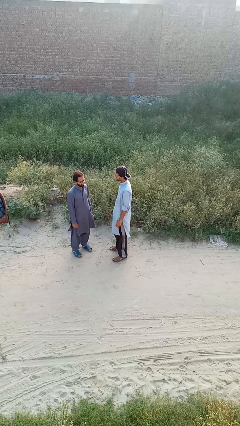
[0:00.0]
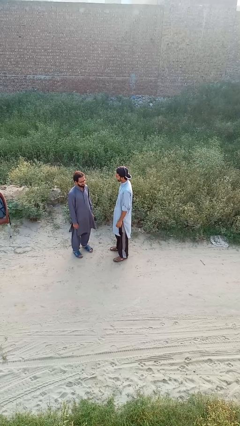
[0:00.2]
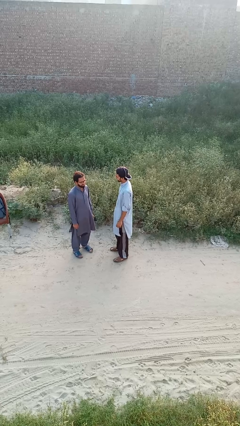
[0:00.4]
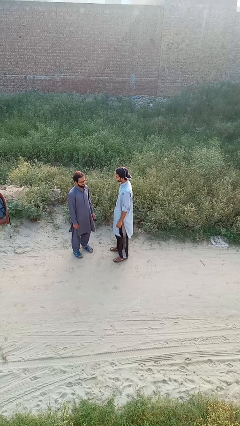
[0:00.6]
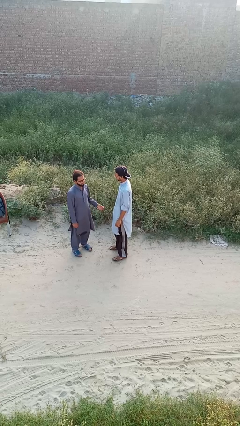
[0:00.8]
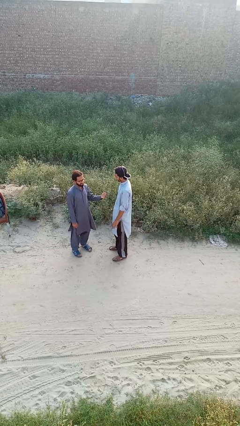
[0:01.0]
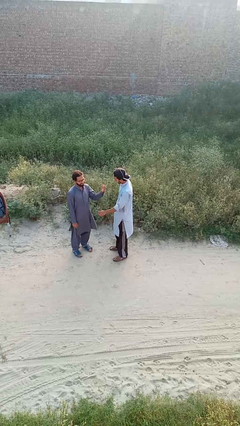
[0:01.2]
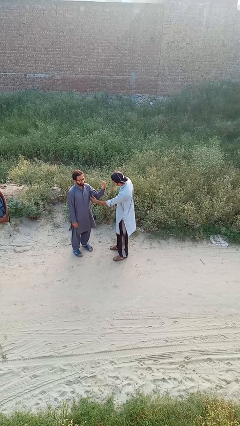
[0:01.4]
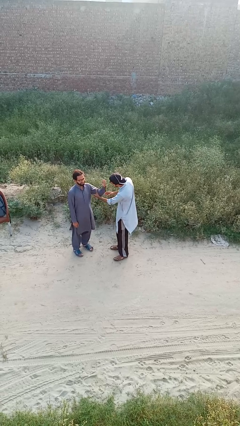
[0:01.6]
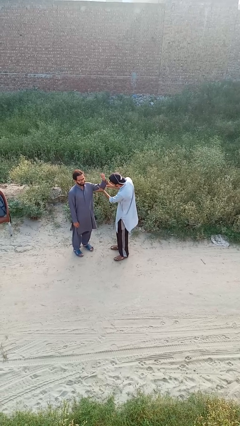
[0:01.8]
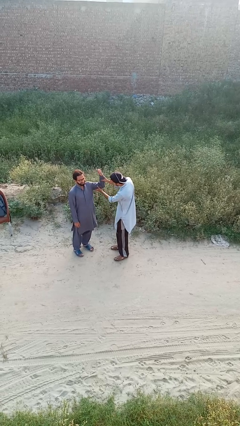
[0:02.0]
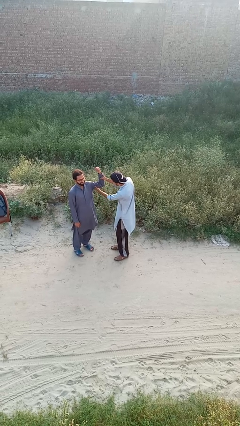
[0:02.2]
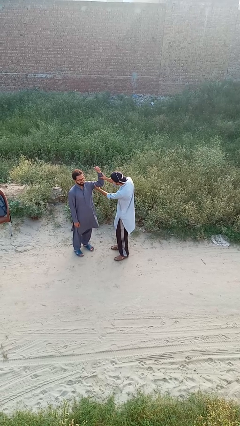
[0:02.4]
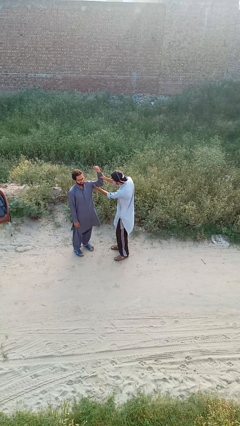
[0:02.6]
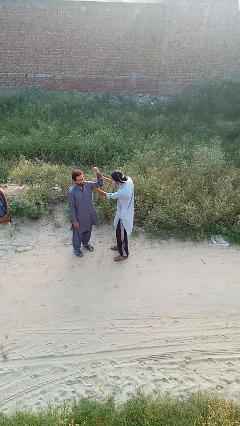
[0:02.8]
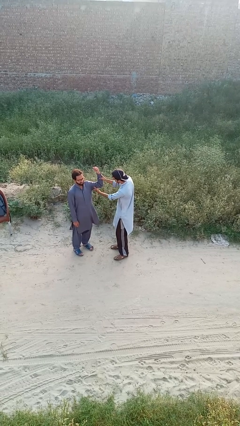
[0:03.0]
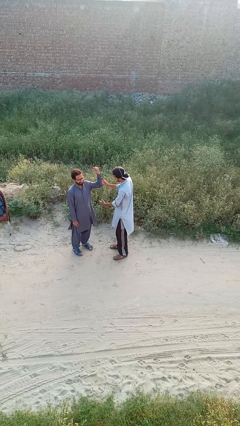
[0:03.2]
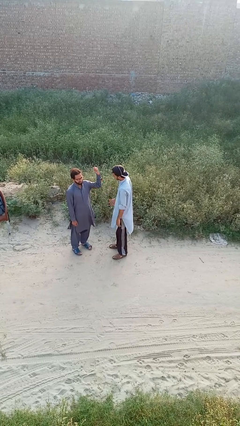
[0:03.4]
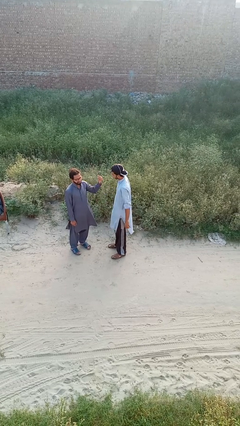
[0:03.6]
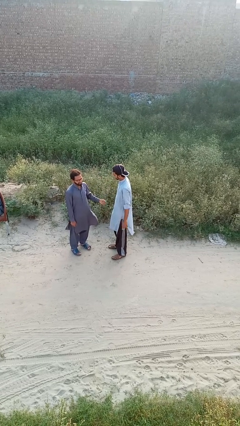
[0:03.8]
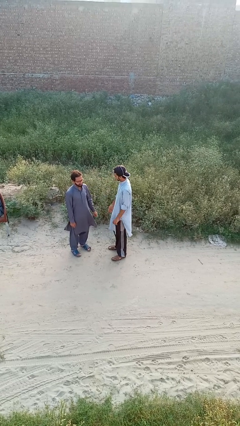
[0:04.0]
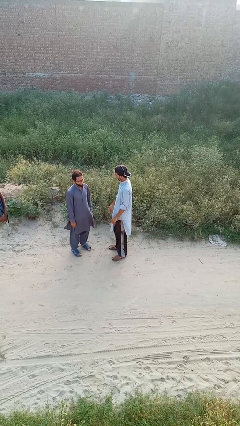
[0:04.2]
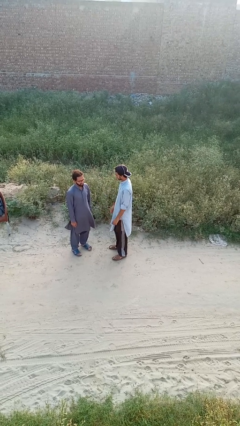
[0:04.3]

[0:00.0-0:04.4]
person grabs person by bicep

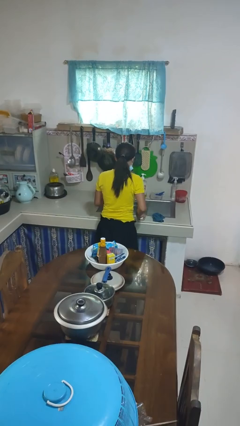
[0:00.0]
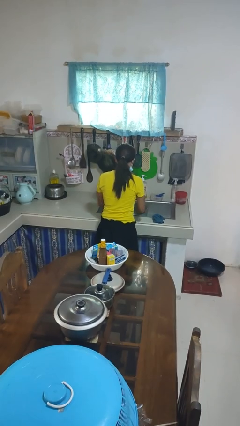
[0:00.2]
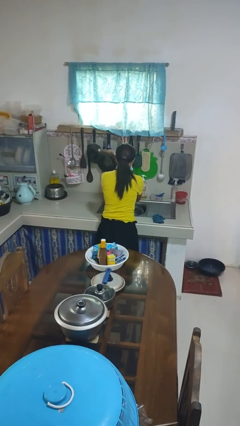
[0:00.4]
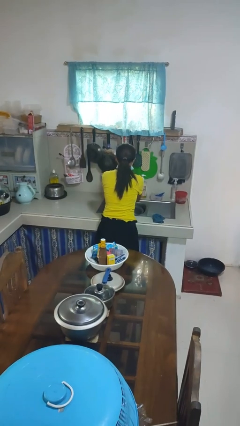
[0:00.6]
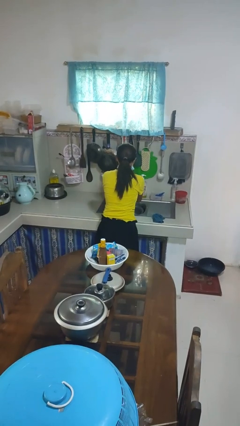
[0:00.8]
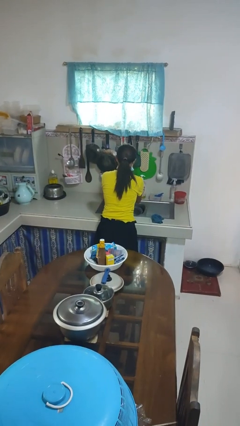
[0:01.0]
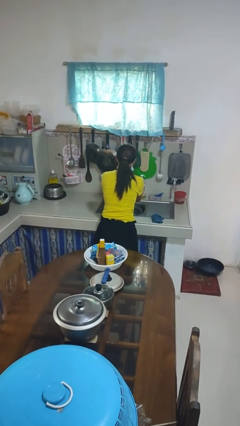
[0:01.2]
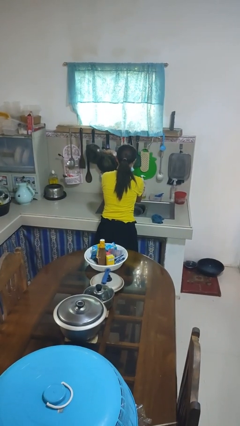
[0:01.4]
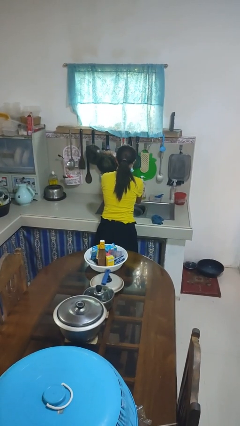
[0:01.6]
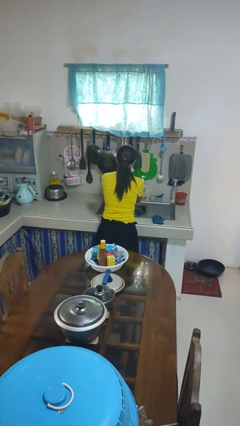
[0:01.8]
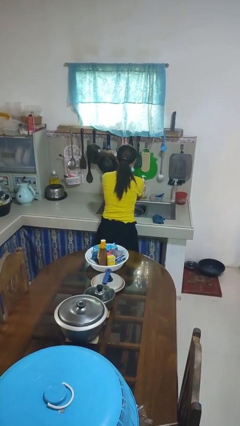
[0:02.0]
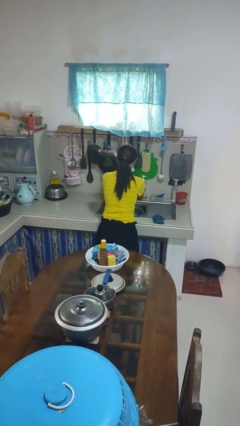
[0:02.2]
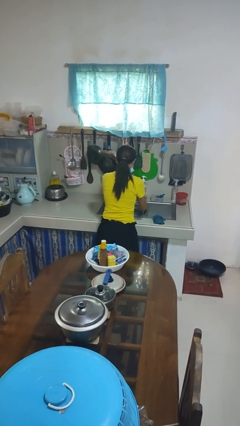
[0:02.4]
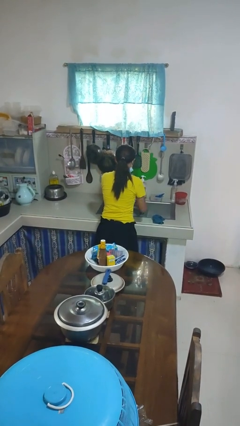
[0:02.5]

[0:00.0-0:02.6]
person washes hands

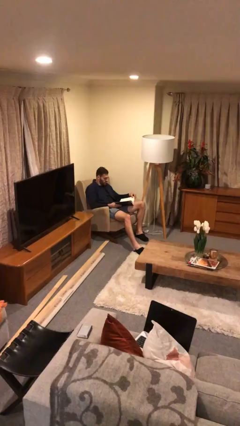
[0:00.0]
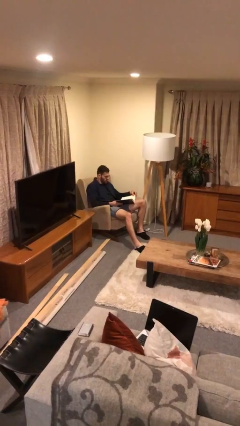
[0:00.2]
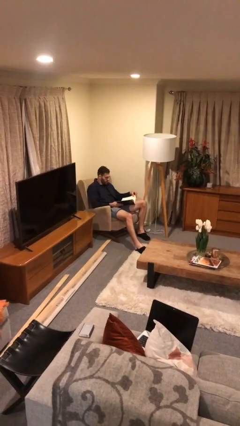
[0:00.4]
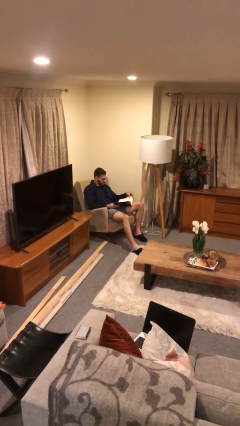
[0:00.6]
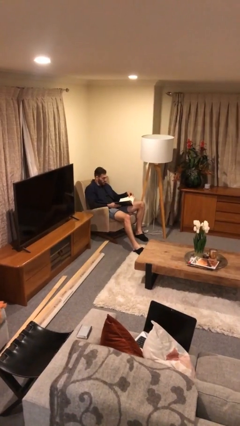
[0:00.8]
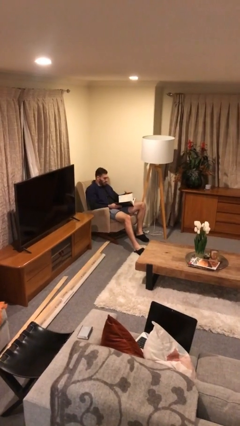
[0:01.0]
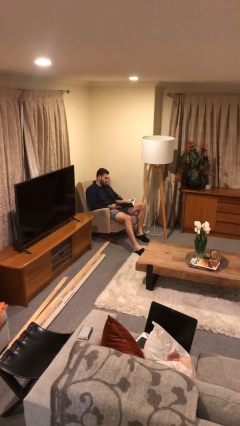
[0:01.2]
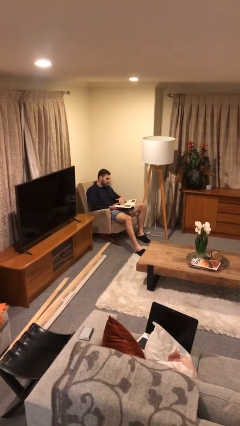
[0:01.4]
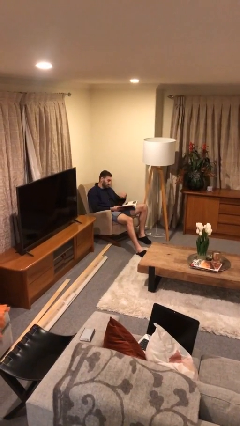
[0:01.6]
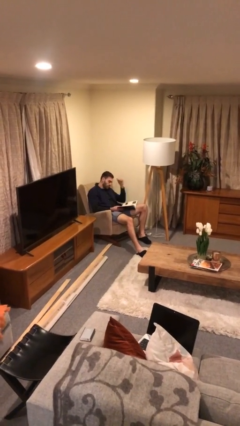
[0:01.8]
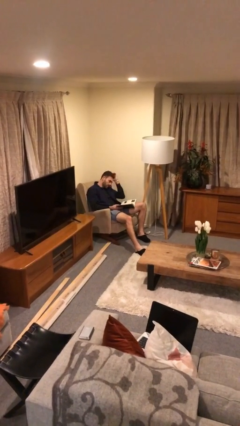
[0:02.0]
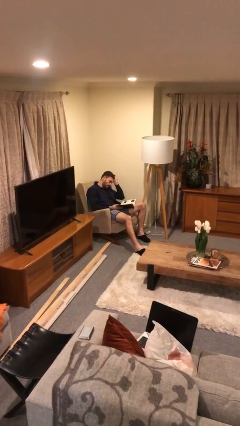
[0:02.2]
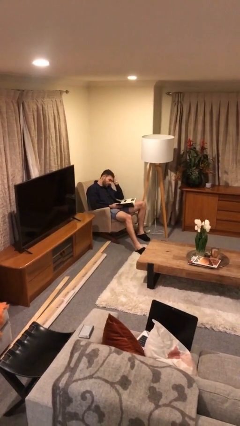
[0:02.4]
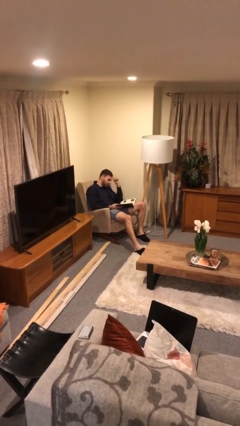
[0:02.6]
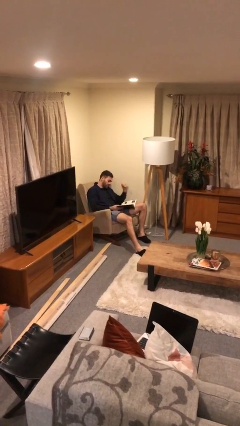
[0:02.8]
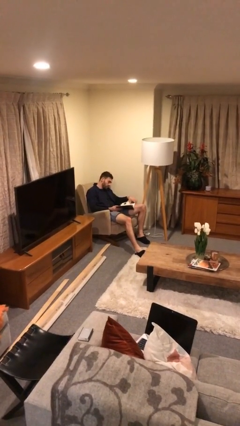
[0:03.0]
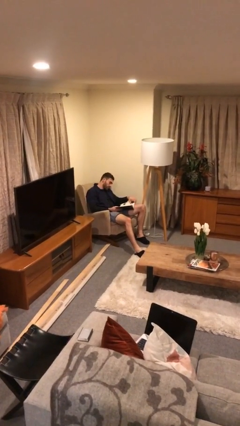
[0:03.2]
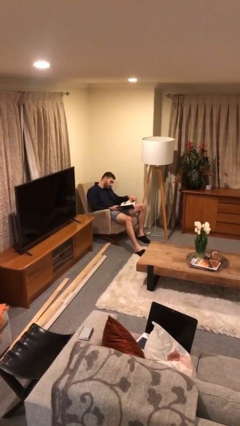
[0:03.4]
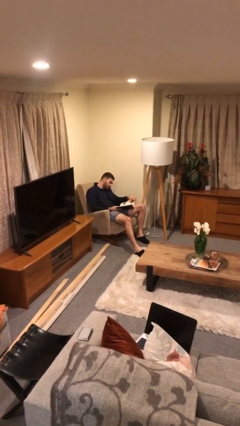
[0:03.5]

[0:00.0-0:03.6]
person reads document

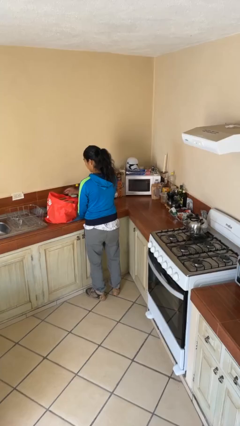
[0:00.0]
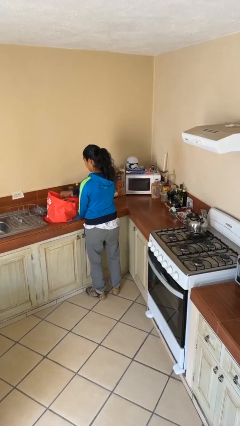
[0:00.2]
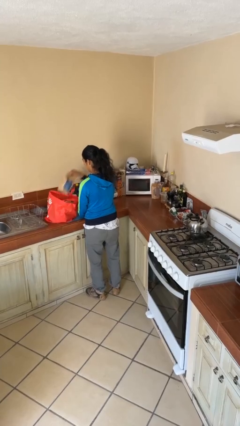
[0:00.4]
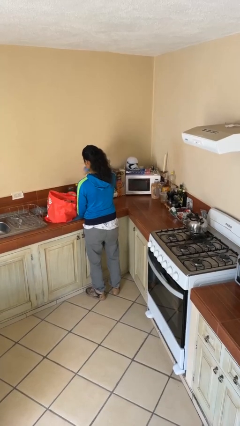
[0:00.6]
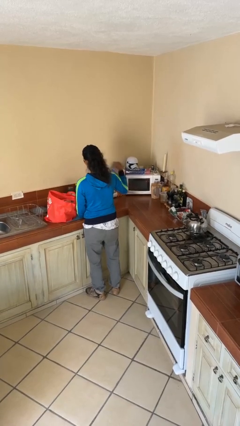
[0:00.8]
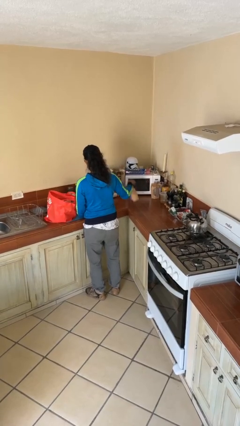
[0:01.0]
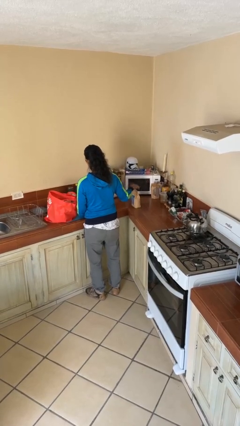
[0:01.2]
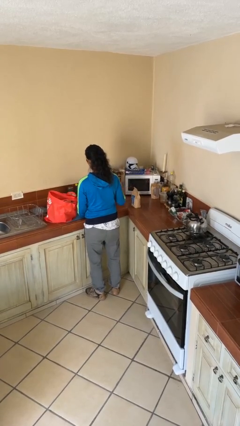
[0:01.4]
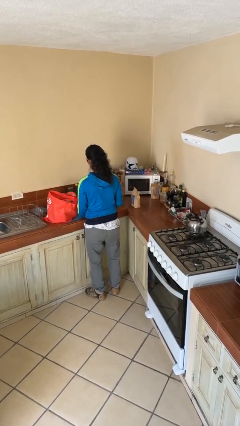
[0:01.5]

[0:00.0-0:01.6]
person takes object from bag

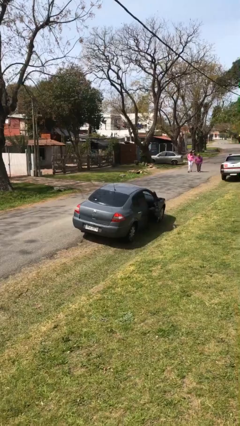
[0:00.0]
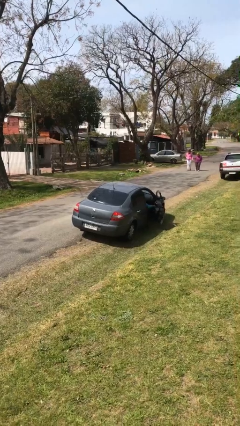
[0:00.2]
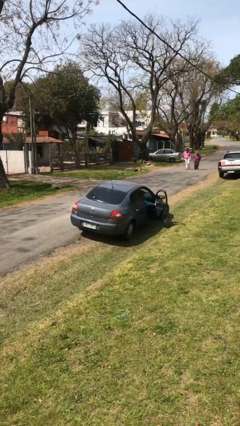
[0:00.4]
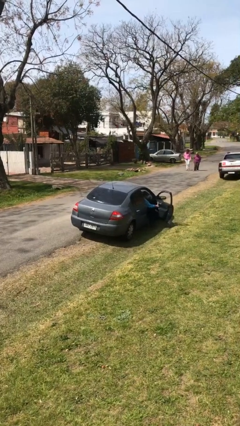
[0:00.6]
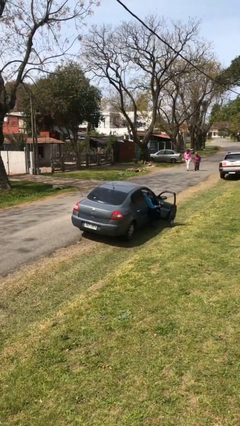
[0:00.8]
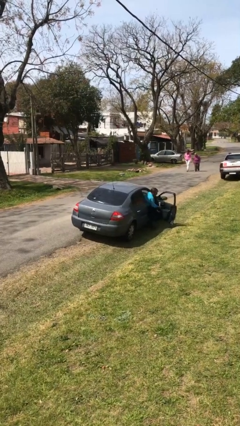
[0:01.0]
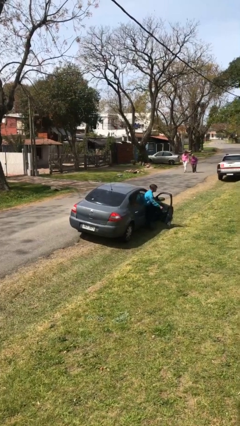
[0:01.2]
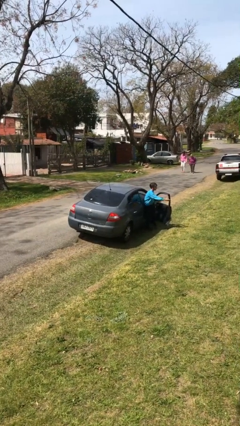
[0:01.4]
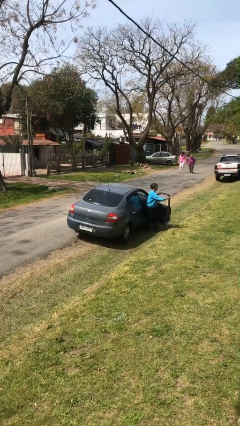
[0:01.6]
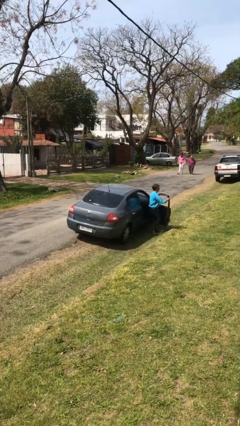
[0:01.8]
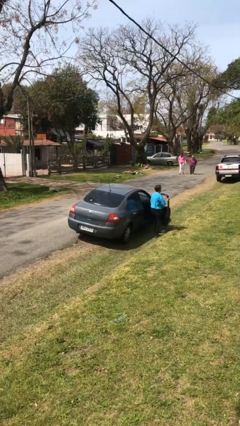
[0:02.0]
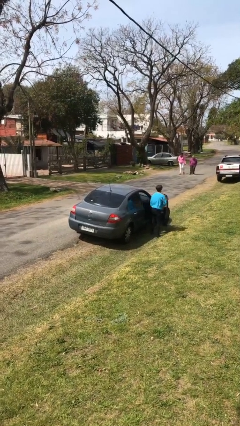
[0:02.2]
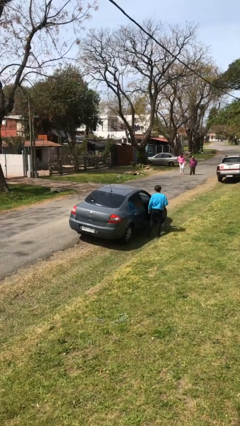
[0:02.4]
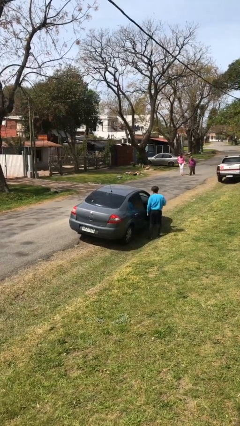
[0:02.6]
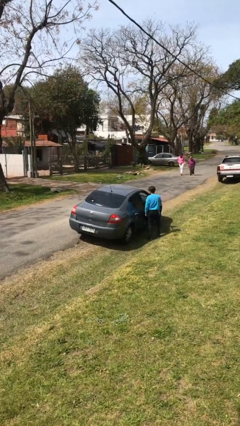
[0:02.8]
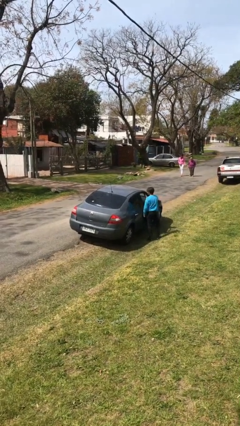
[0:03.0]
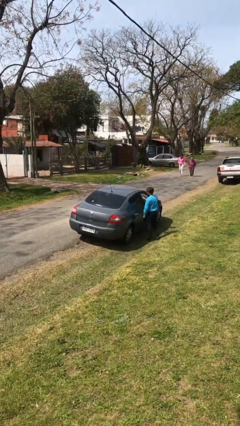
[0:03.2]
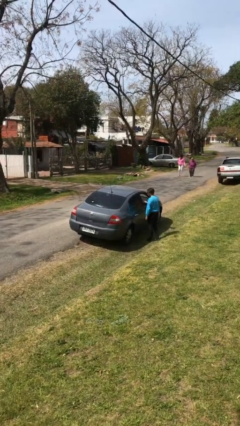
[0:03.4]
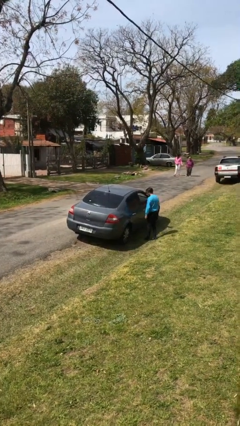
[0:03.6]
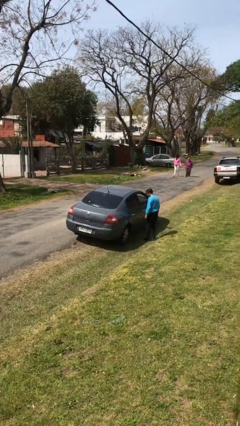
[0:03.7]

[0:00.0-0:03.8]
car drops off person

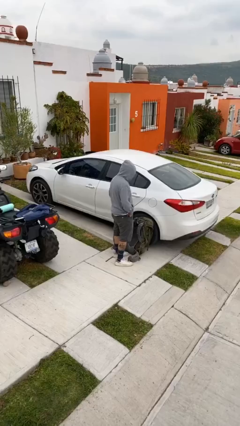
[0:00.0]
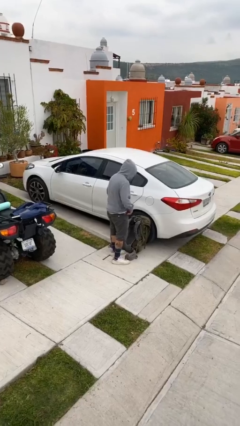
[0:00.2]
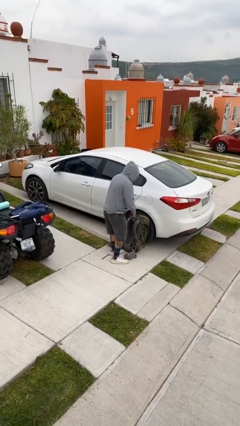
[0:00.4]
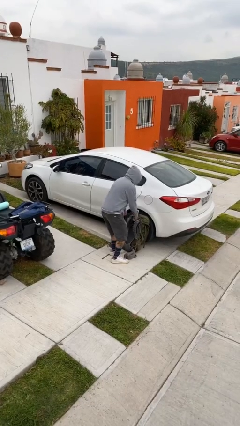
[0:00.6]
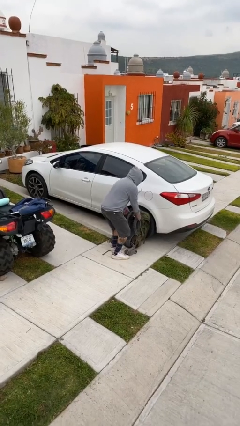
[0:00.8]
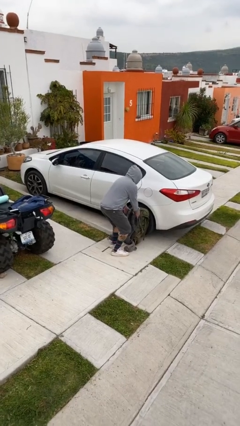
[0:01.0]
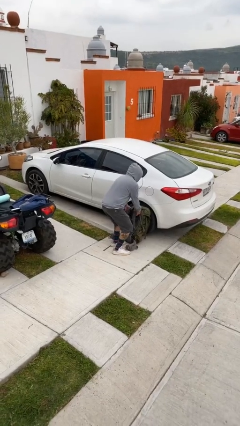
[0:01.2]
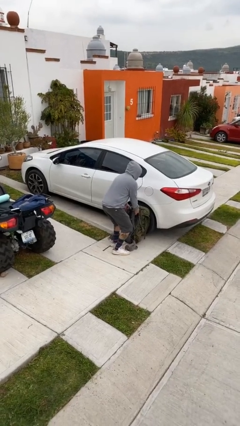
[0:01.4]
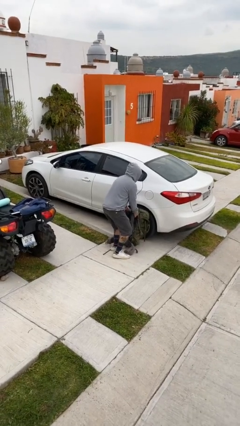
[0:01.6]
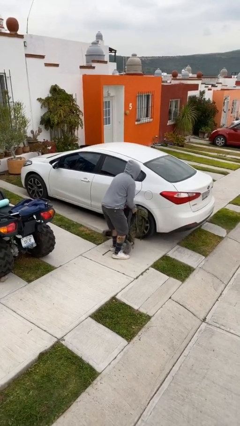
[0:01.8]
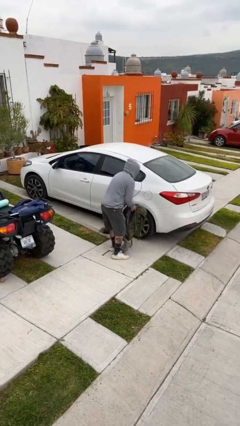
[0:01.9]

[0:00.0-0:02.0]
person picks up object from floor
